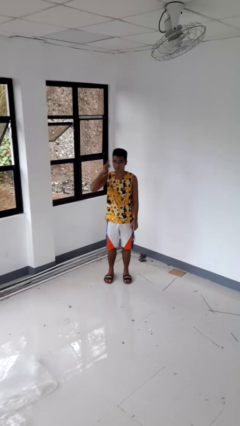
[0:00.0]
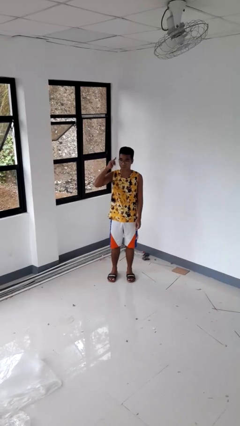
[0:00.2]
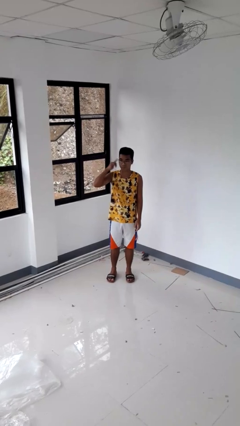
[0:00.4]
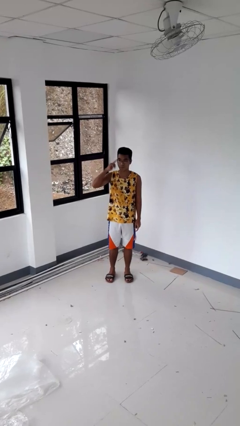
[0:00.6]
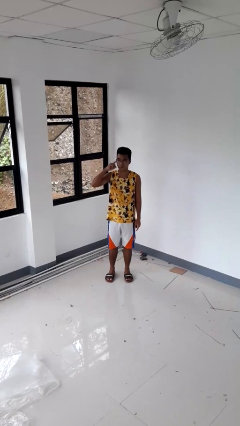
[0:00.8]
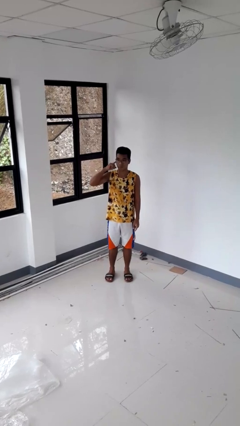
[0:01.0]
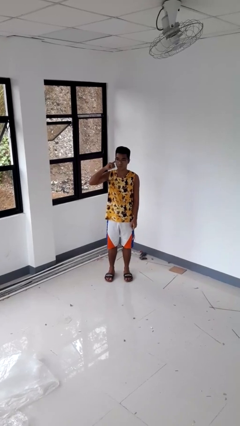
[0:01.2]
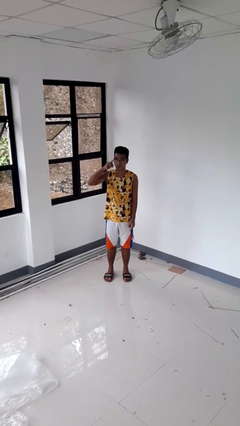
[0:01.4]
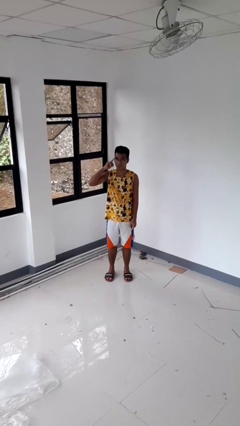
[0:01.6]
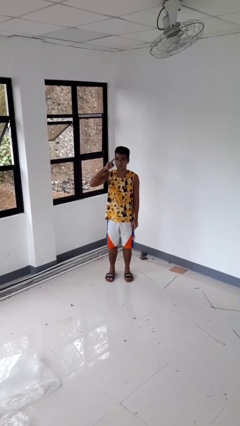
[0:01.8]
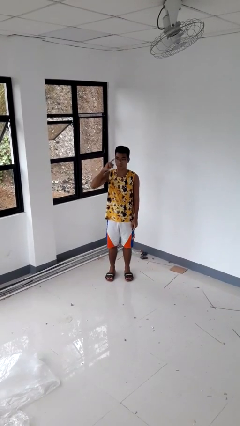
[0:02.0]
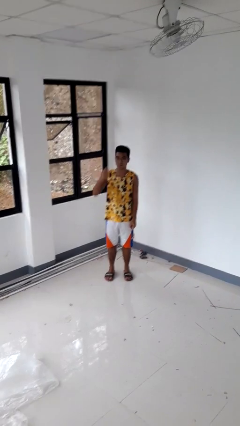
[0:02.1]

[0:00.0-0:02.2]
person gestures listen closely

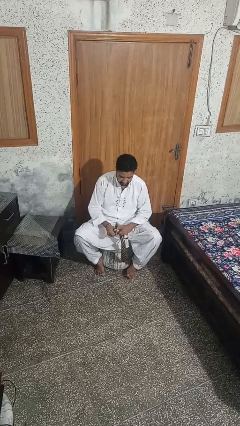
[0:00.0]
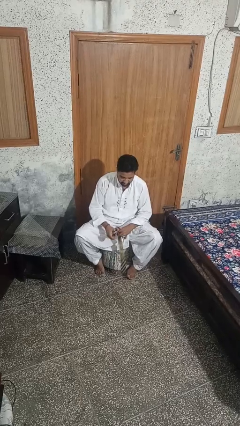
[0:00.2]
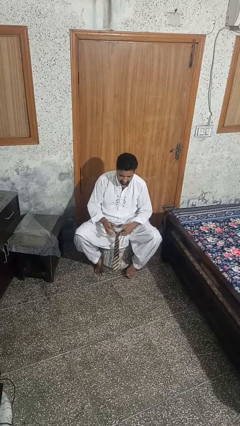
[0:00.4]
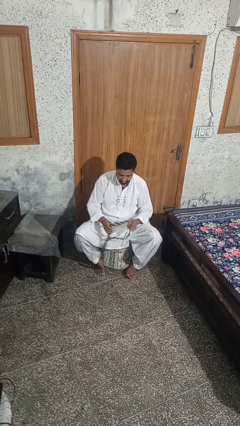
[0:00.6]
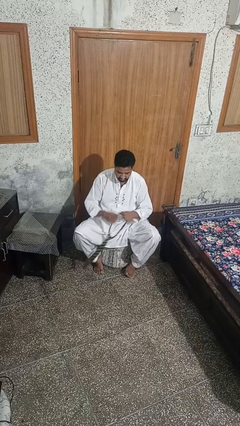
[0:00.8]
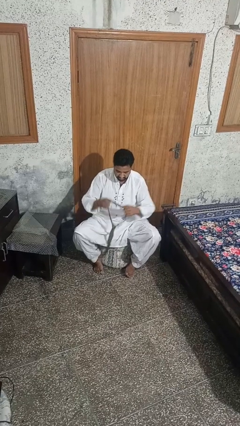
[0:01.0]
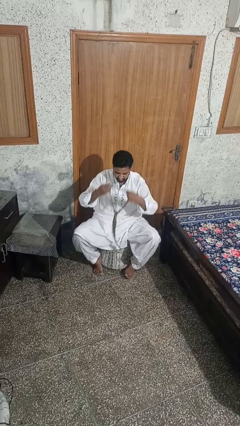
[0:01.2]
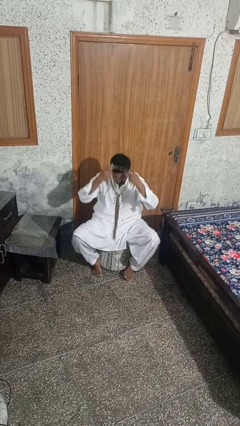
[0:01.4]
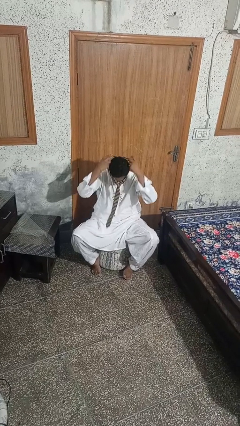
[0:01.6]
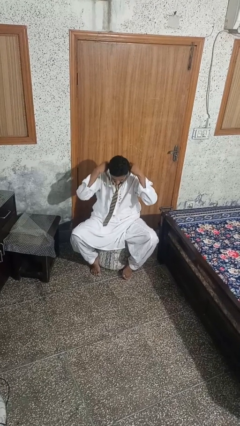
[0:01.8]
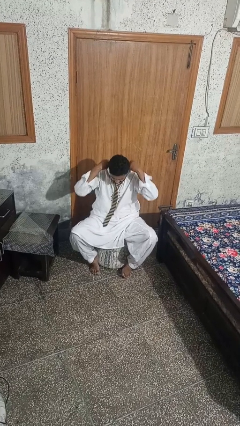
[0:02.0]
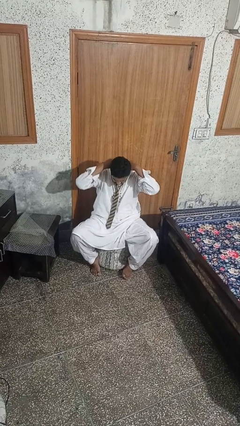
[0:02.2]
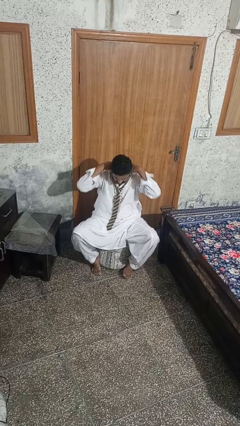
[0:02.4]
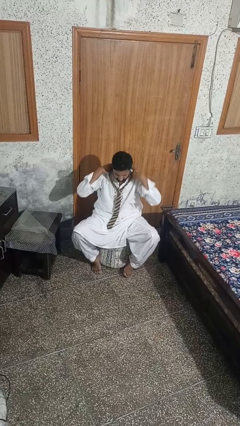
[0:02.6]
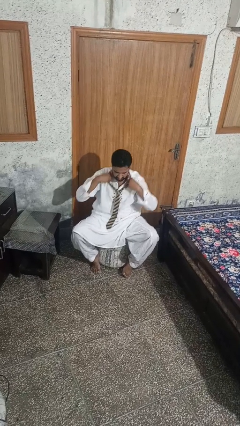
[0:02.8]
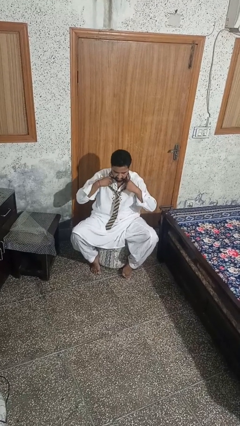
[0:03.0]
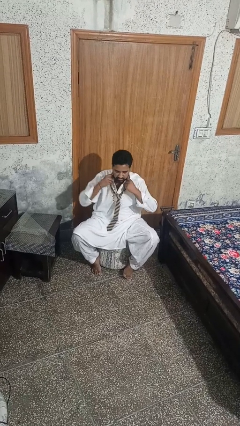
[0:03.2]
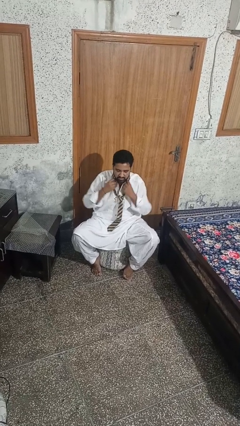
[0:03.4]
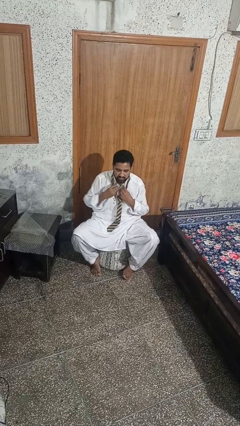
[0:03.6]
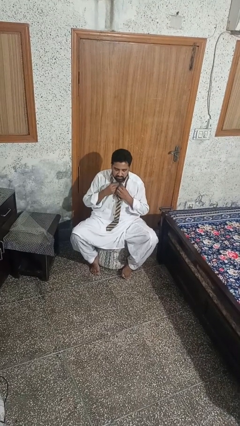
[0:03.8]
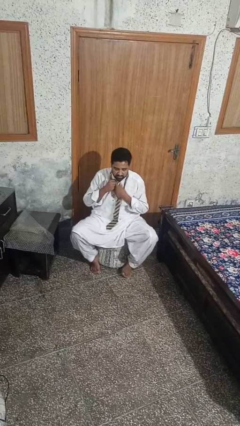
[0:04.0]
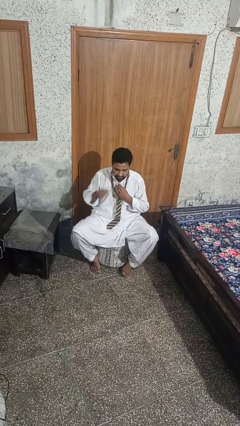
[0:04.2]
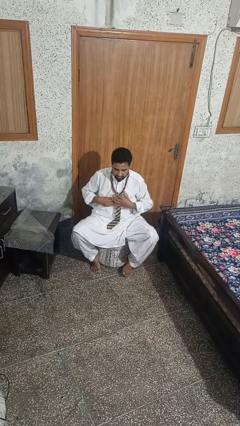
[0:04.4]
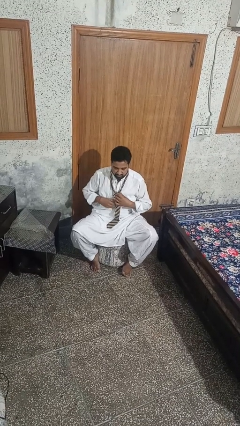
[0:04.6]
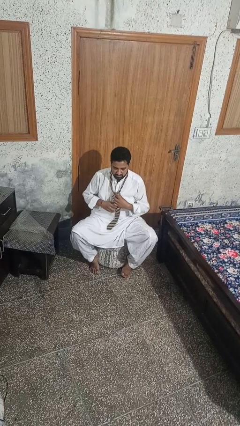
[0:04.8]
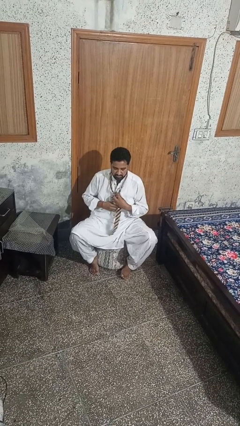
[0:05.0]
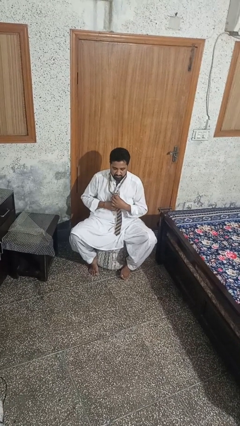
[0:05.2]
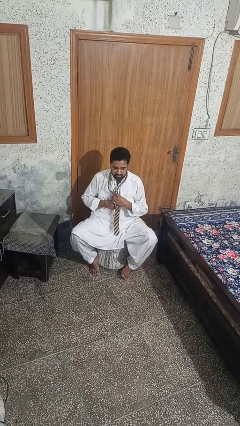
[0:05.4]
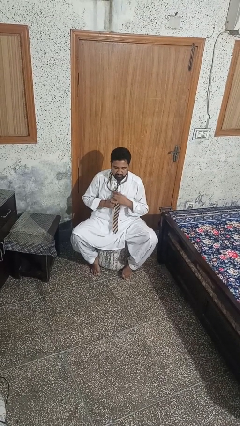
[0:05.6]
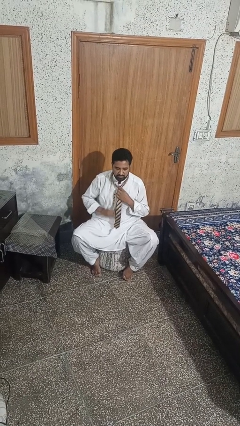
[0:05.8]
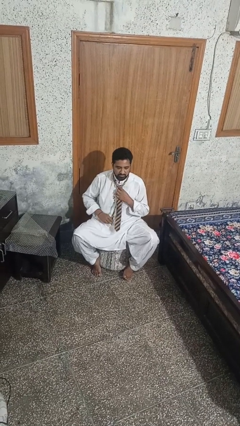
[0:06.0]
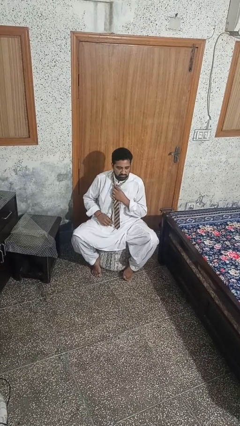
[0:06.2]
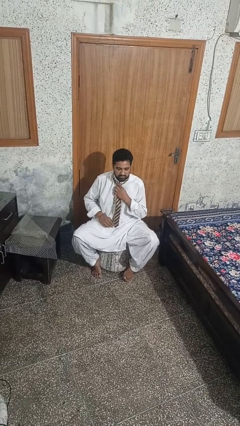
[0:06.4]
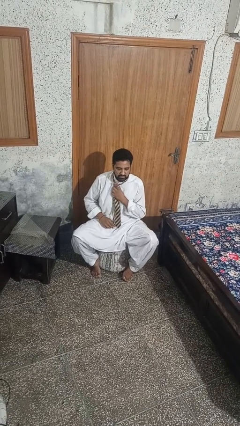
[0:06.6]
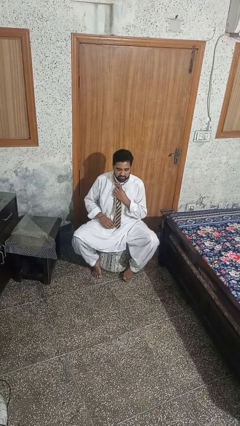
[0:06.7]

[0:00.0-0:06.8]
person puts on necktie

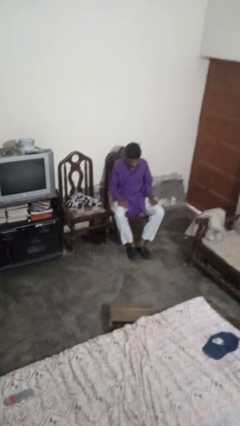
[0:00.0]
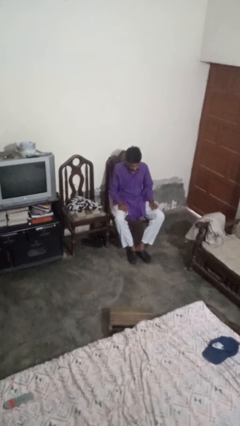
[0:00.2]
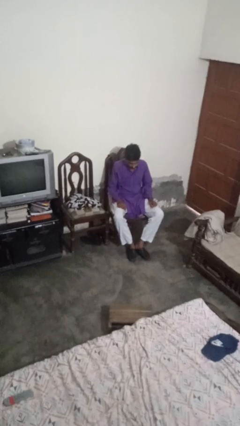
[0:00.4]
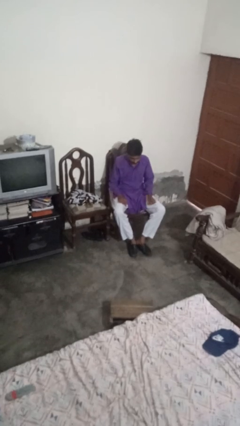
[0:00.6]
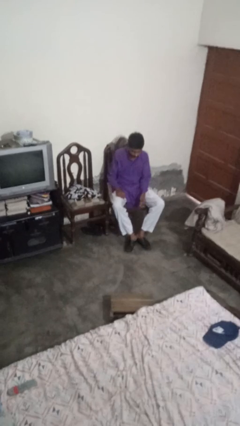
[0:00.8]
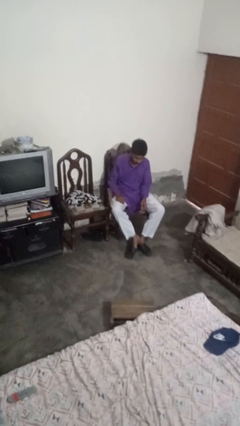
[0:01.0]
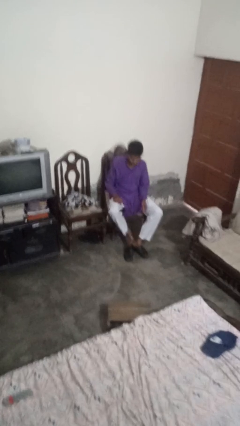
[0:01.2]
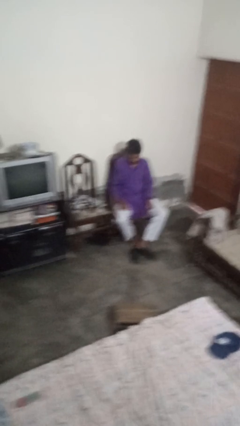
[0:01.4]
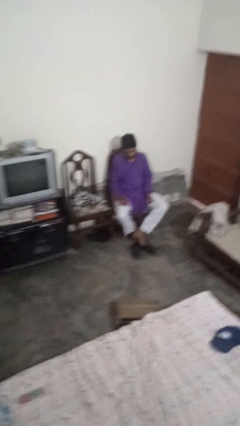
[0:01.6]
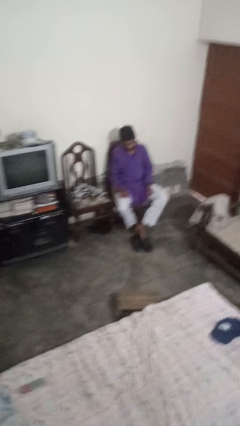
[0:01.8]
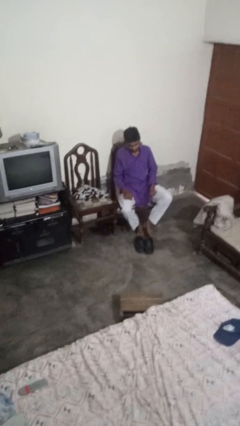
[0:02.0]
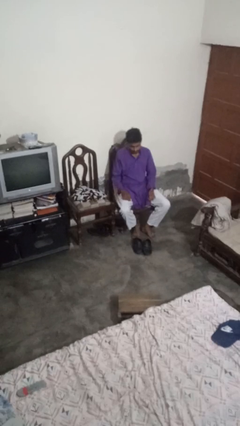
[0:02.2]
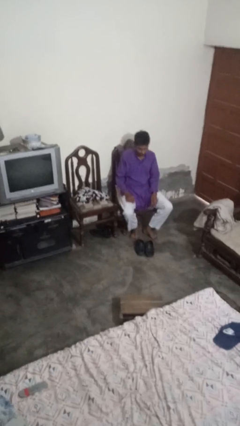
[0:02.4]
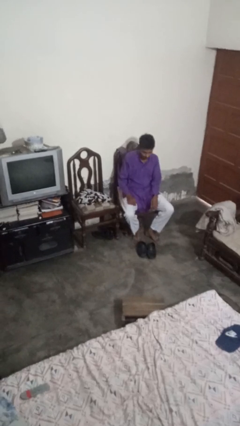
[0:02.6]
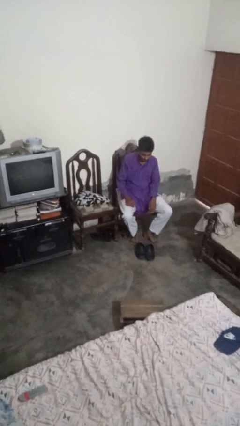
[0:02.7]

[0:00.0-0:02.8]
person takes off shoes

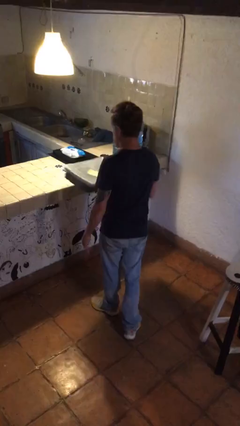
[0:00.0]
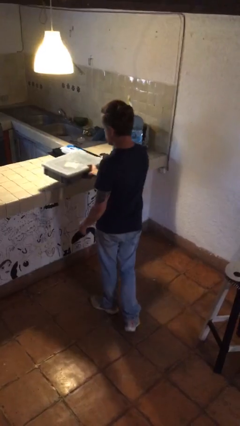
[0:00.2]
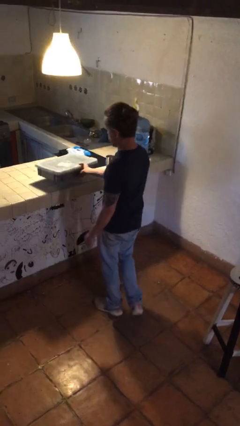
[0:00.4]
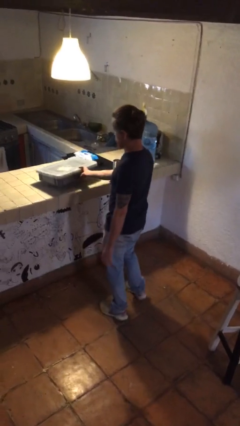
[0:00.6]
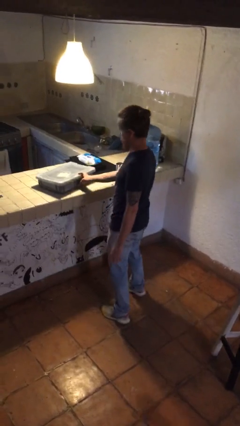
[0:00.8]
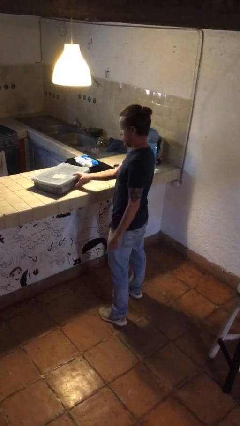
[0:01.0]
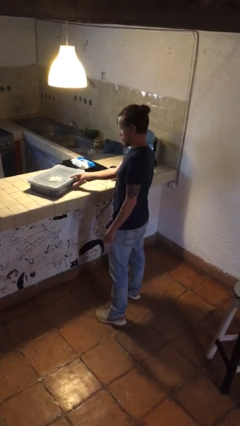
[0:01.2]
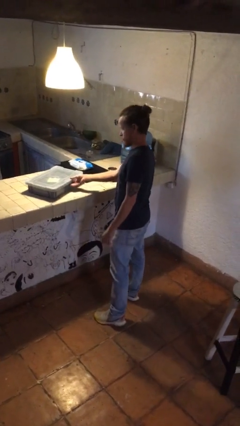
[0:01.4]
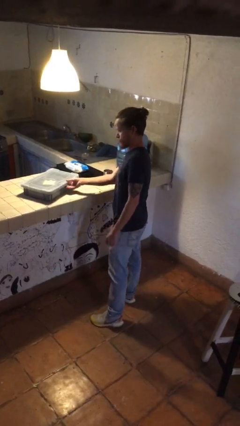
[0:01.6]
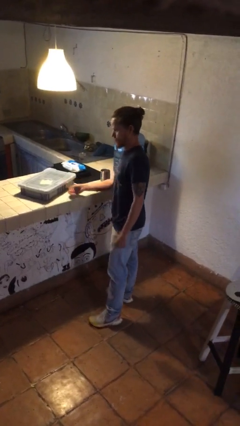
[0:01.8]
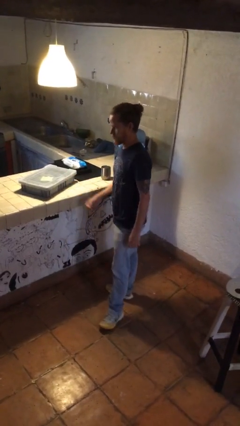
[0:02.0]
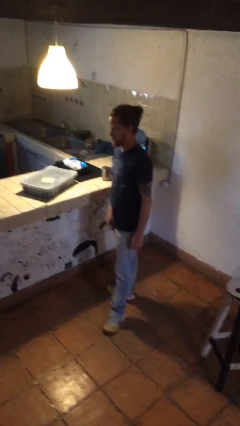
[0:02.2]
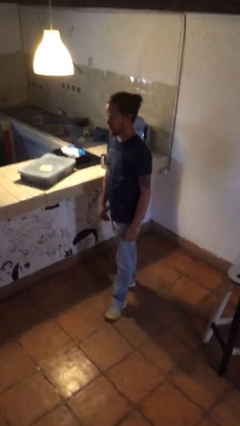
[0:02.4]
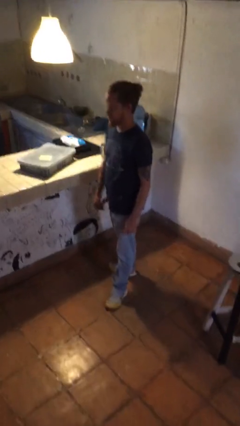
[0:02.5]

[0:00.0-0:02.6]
person puts down object on countertop

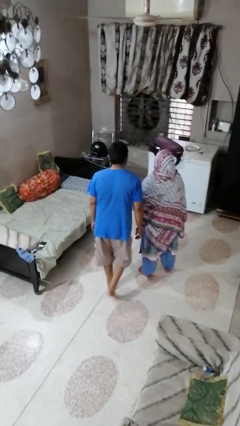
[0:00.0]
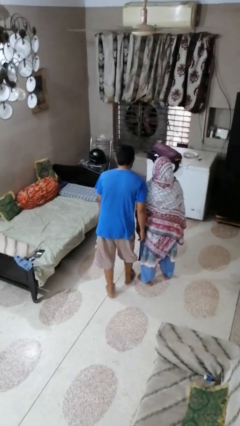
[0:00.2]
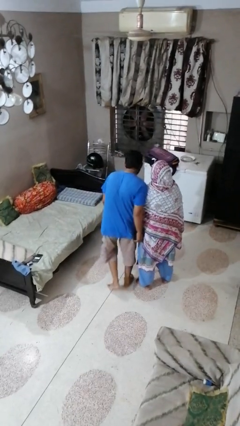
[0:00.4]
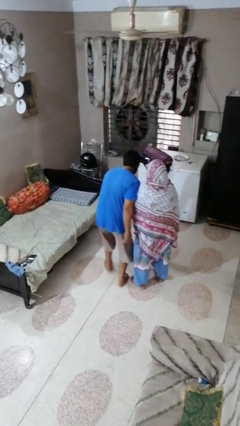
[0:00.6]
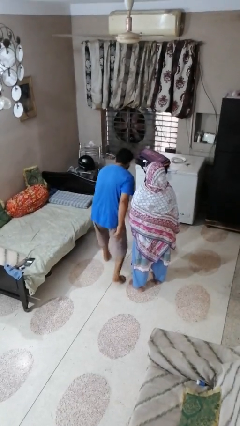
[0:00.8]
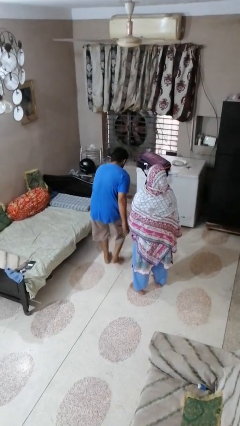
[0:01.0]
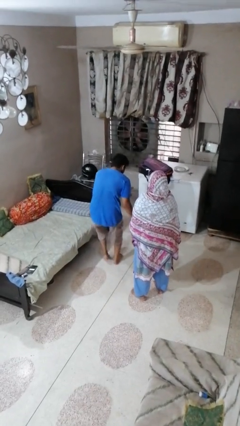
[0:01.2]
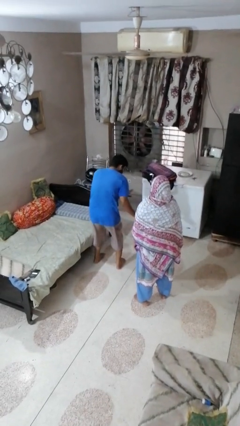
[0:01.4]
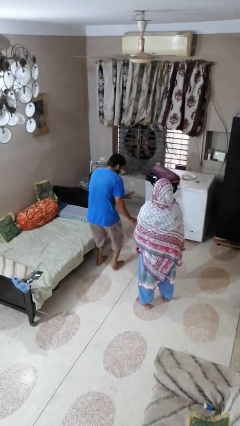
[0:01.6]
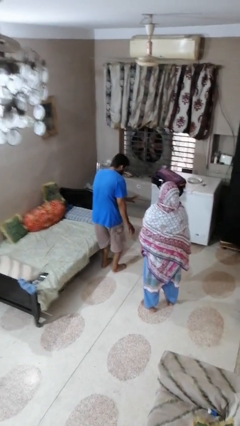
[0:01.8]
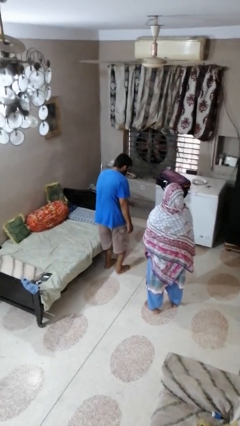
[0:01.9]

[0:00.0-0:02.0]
person bumps into person

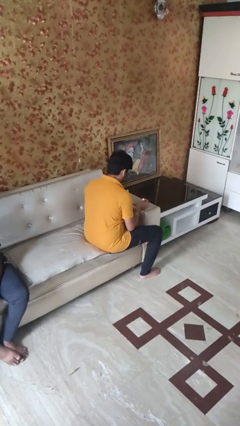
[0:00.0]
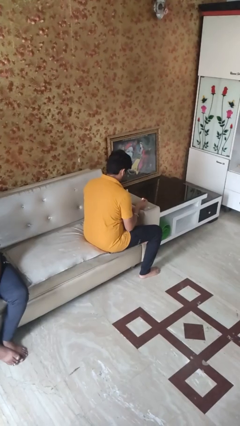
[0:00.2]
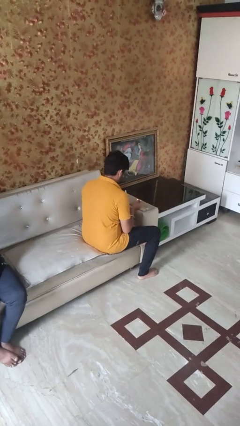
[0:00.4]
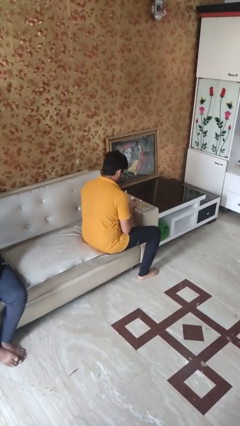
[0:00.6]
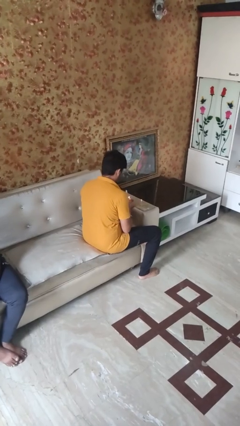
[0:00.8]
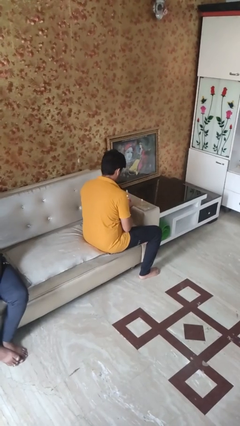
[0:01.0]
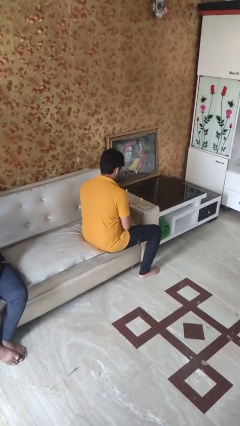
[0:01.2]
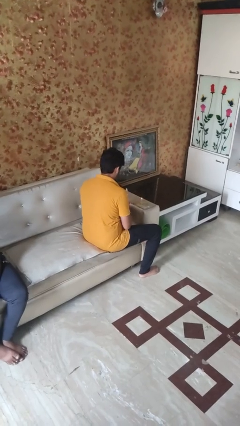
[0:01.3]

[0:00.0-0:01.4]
person lights candle
